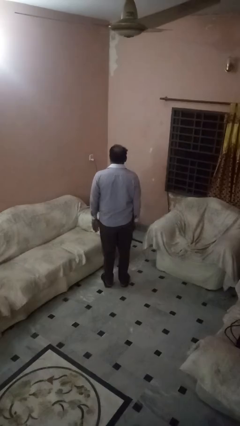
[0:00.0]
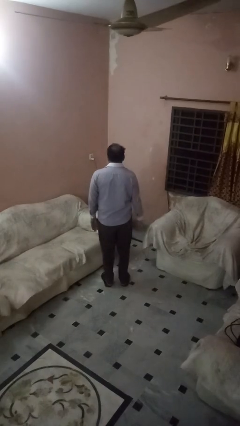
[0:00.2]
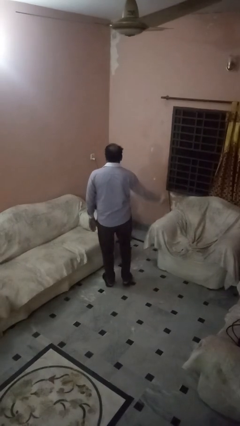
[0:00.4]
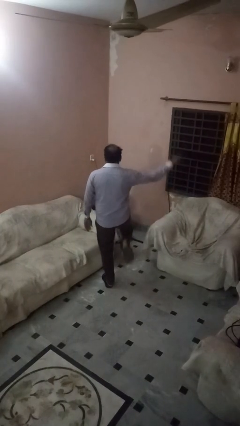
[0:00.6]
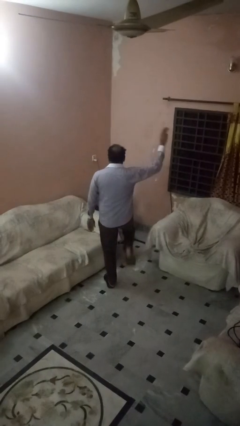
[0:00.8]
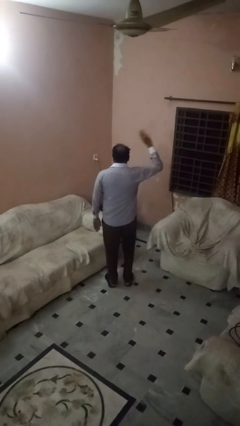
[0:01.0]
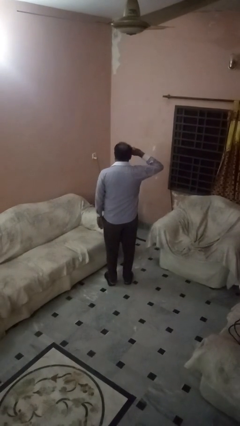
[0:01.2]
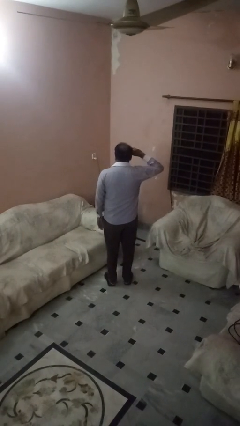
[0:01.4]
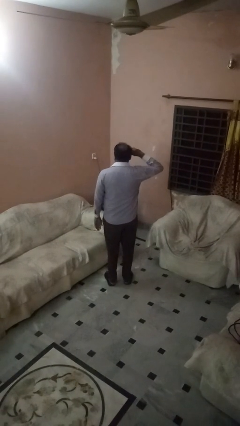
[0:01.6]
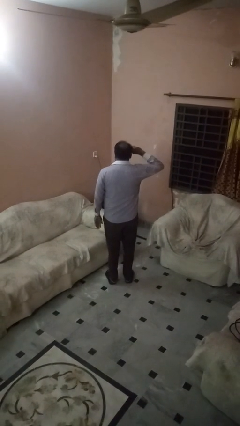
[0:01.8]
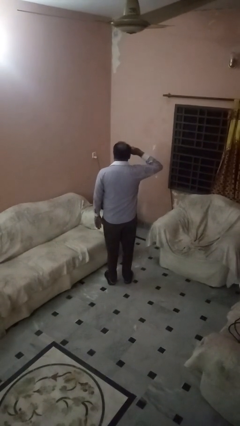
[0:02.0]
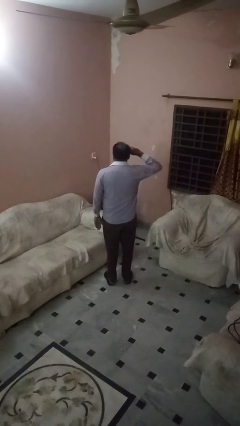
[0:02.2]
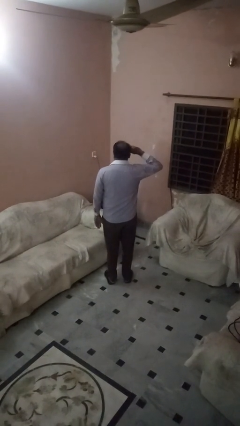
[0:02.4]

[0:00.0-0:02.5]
person salutes

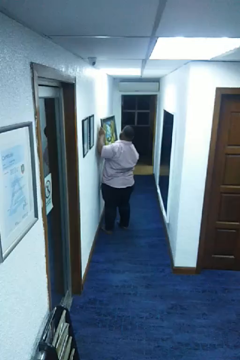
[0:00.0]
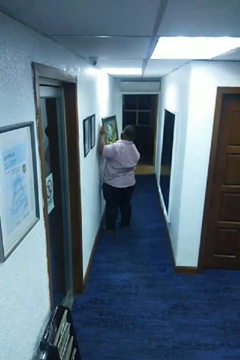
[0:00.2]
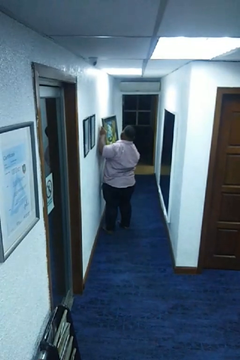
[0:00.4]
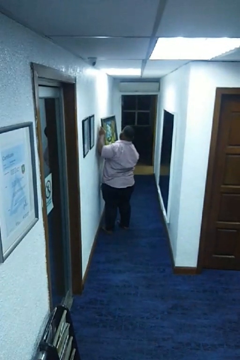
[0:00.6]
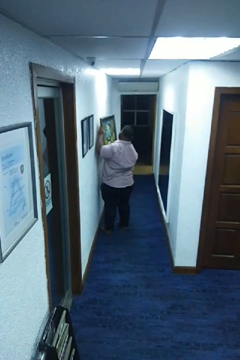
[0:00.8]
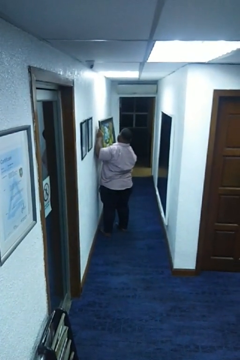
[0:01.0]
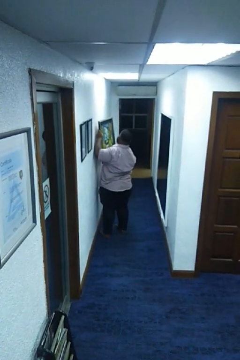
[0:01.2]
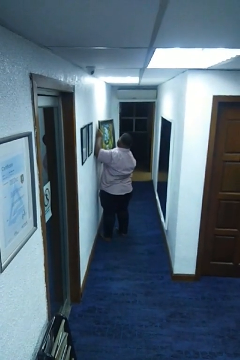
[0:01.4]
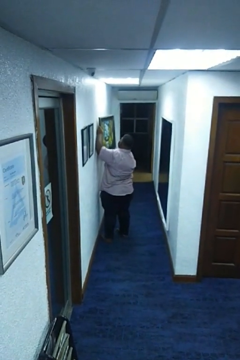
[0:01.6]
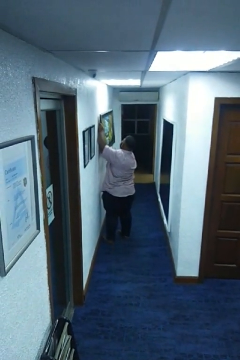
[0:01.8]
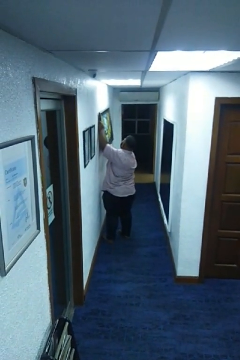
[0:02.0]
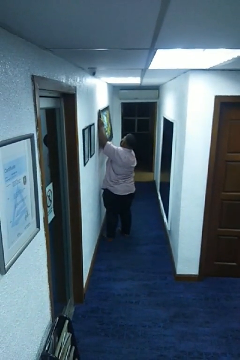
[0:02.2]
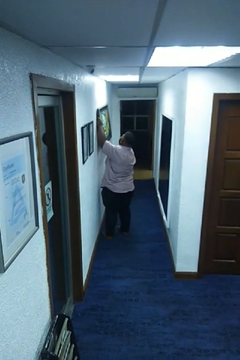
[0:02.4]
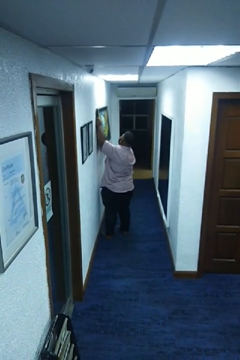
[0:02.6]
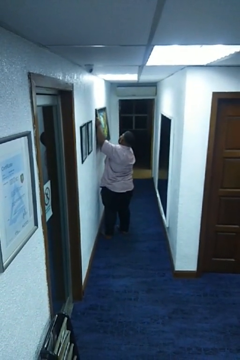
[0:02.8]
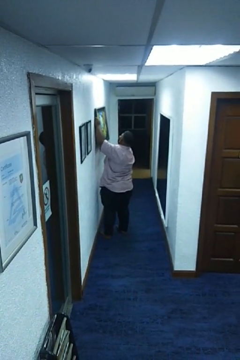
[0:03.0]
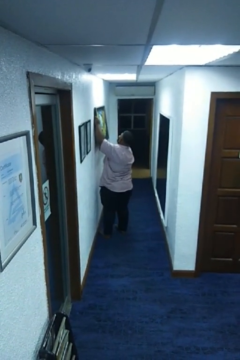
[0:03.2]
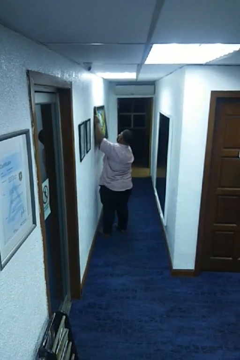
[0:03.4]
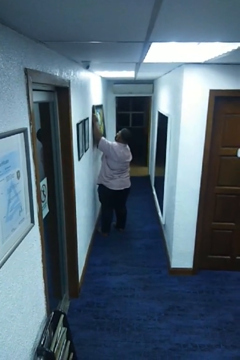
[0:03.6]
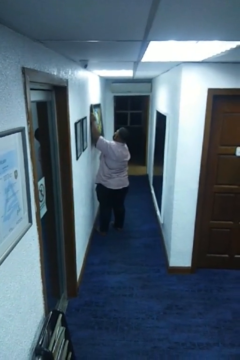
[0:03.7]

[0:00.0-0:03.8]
person puts up picture frame

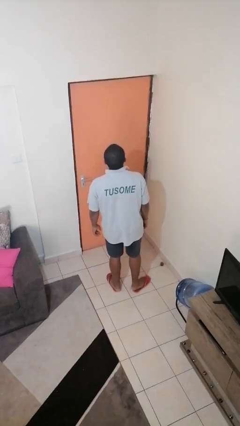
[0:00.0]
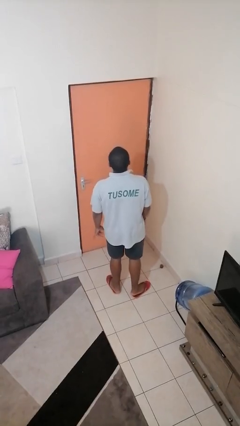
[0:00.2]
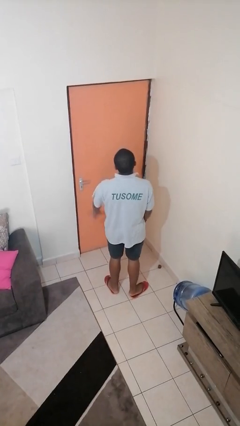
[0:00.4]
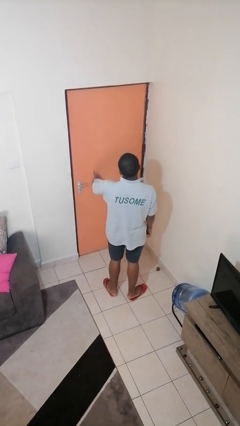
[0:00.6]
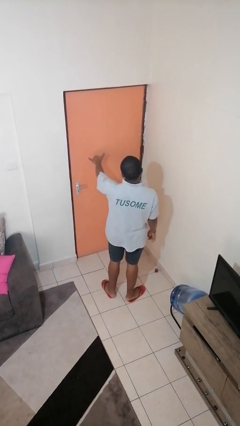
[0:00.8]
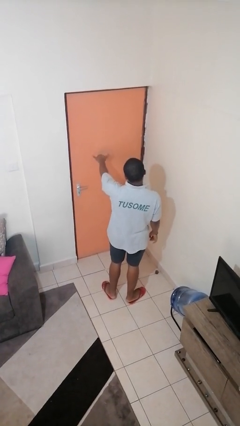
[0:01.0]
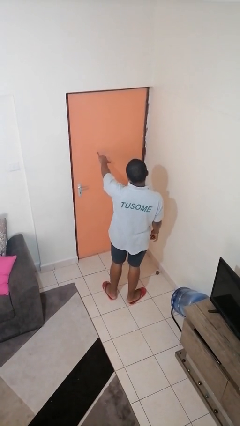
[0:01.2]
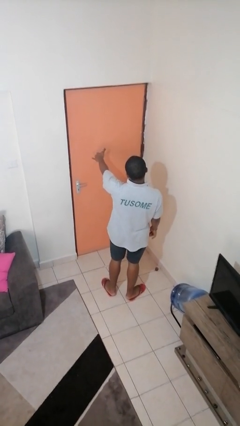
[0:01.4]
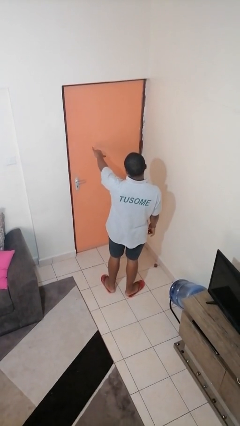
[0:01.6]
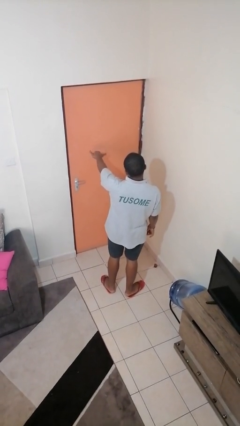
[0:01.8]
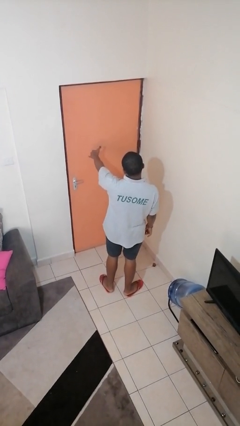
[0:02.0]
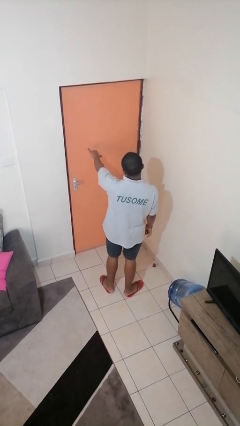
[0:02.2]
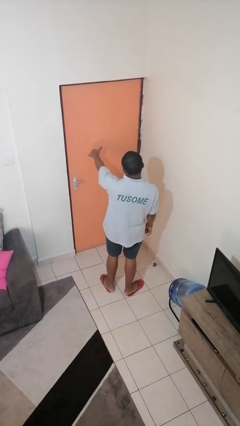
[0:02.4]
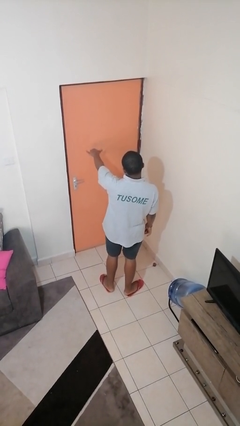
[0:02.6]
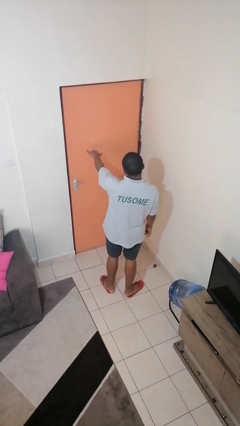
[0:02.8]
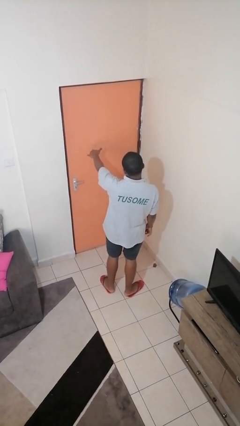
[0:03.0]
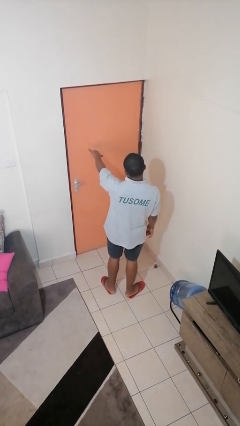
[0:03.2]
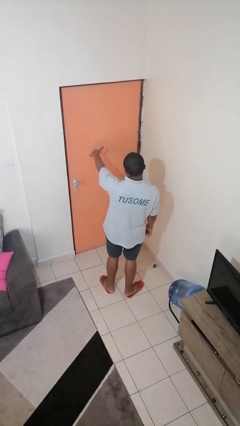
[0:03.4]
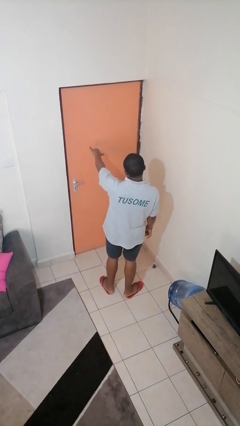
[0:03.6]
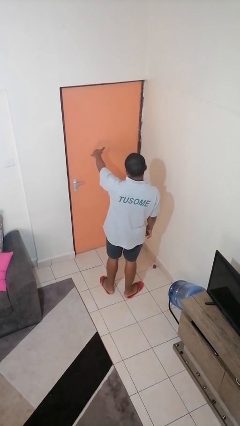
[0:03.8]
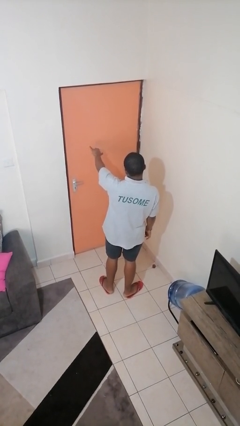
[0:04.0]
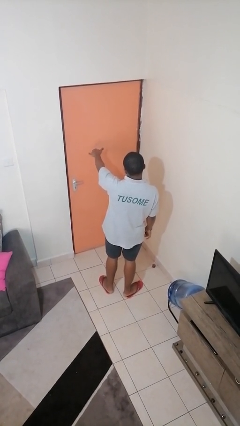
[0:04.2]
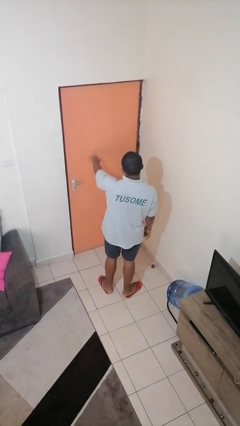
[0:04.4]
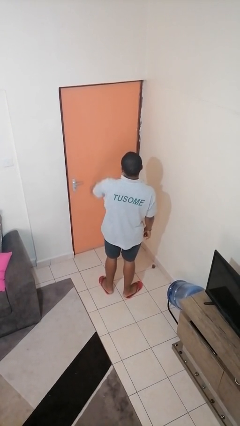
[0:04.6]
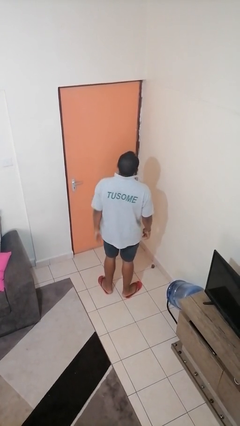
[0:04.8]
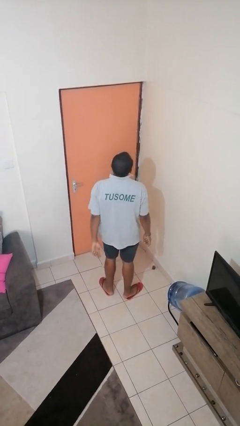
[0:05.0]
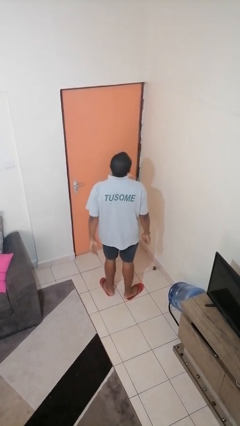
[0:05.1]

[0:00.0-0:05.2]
person gestures hang loose

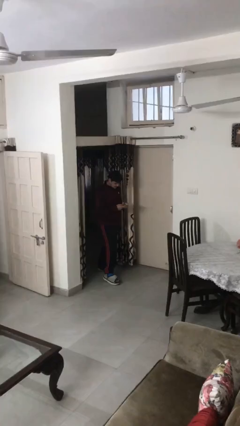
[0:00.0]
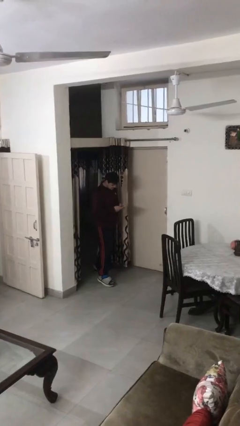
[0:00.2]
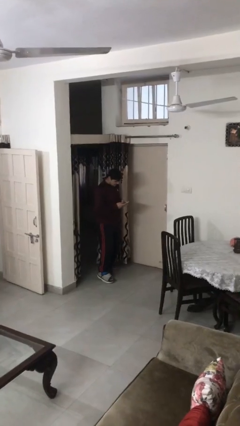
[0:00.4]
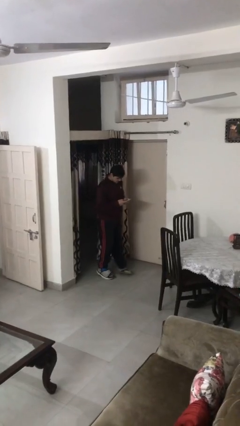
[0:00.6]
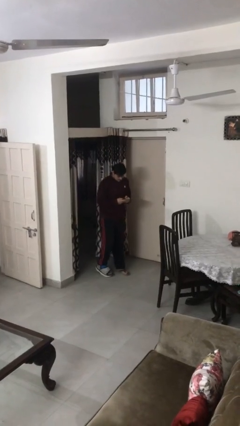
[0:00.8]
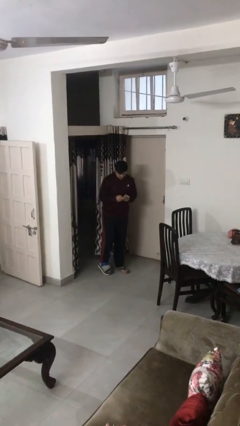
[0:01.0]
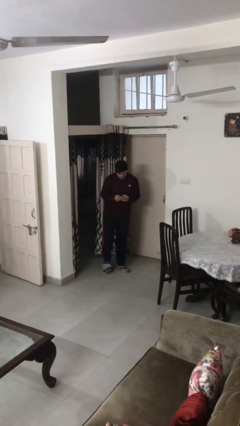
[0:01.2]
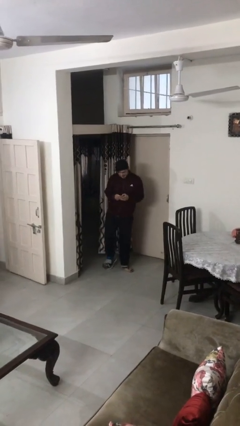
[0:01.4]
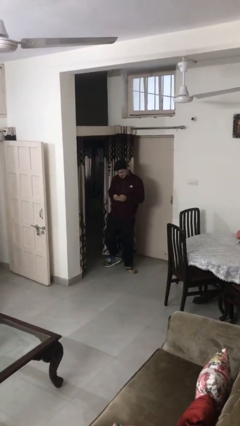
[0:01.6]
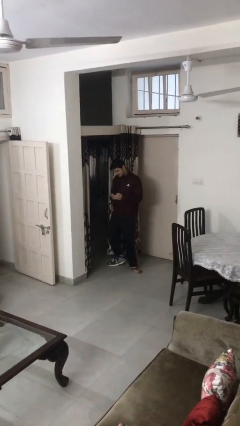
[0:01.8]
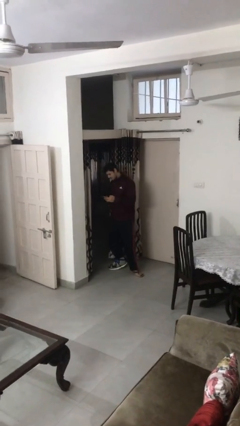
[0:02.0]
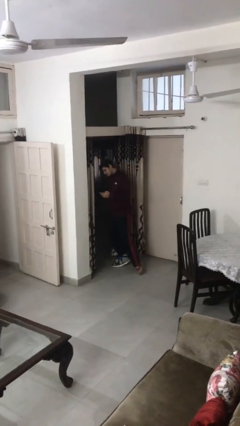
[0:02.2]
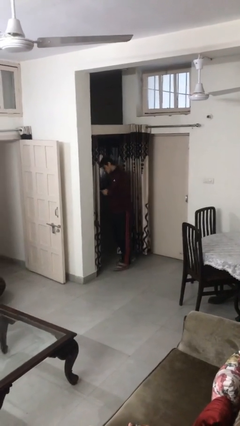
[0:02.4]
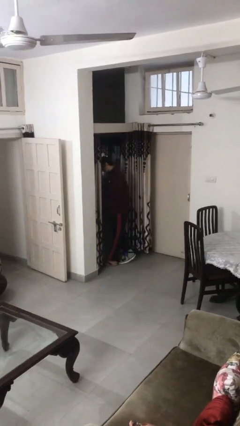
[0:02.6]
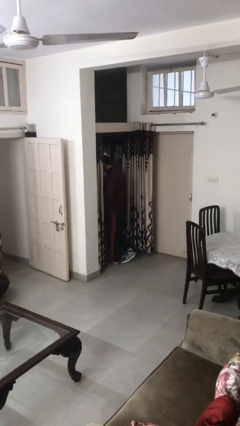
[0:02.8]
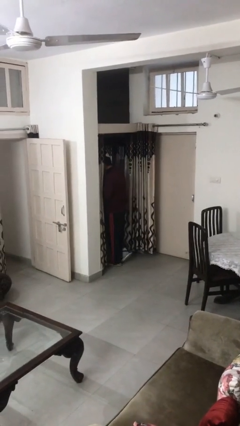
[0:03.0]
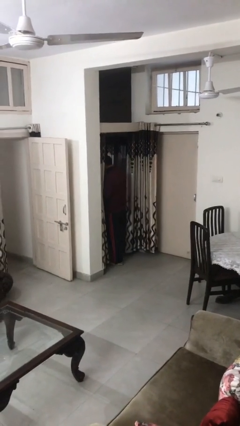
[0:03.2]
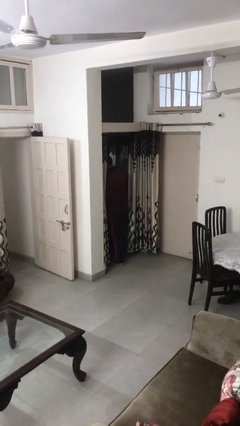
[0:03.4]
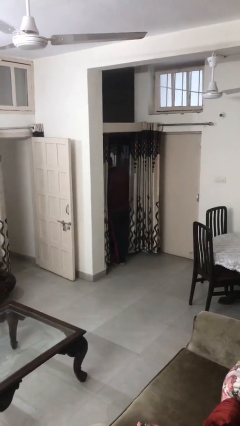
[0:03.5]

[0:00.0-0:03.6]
person exits scene through structure

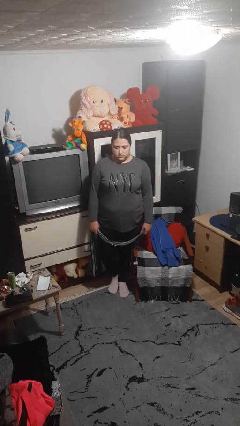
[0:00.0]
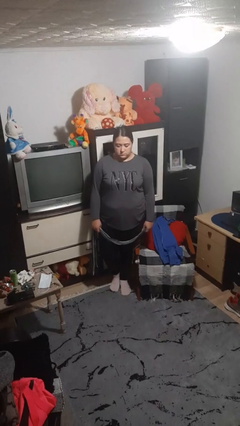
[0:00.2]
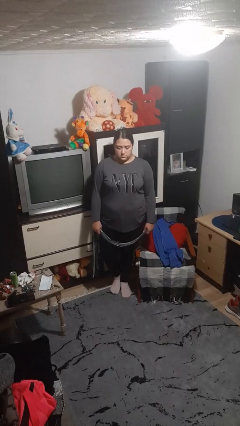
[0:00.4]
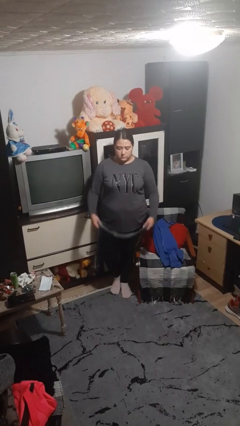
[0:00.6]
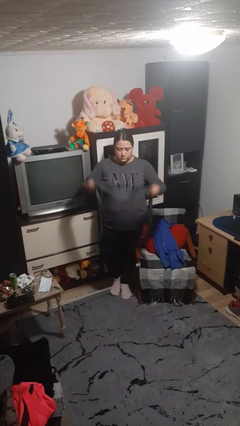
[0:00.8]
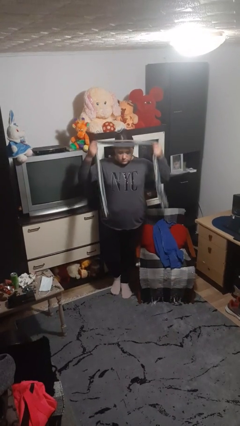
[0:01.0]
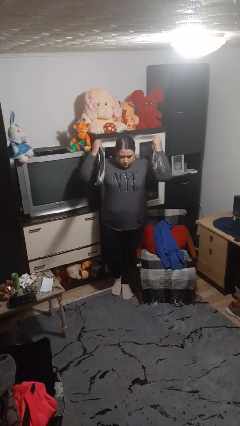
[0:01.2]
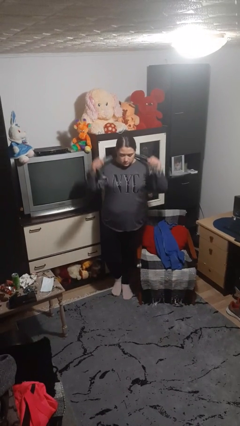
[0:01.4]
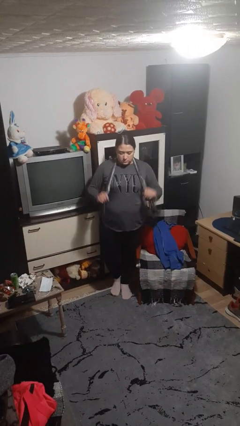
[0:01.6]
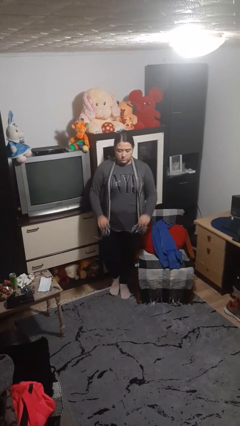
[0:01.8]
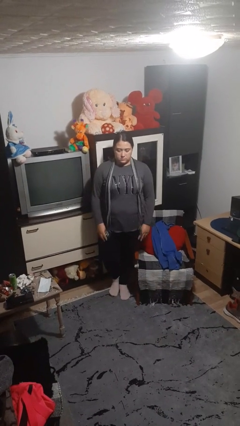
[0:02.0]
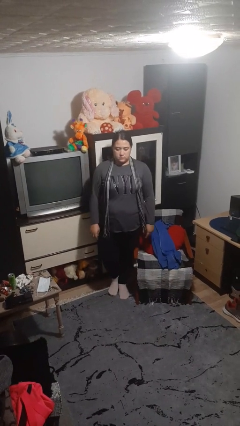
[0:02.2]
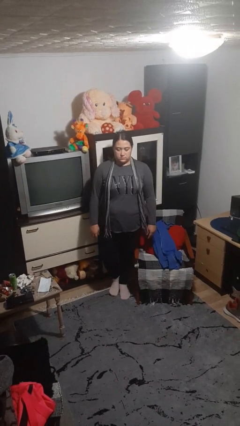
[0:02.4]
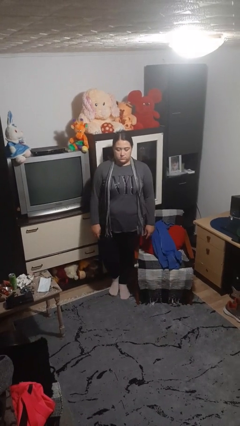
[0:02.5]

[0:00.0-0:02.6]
person puts on scarf

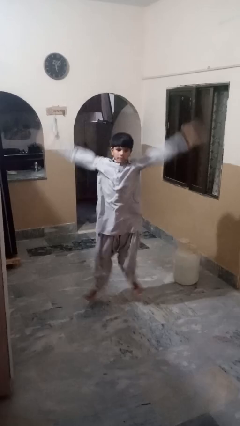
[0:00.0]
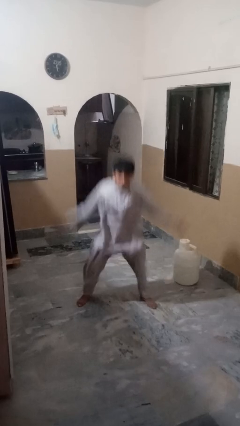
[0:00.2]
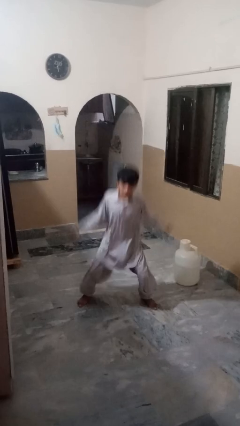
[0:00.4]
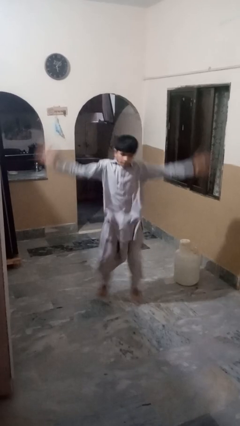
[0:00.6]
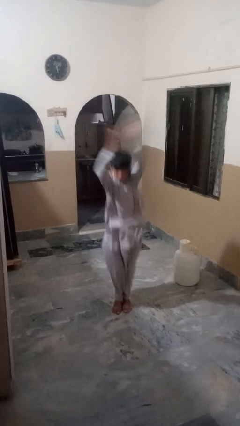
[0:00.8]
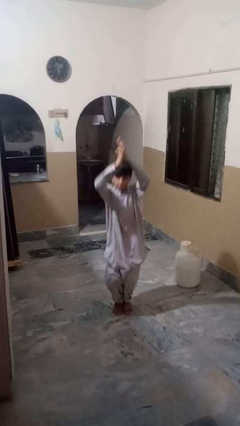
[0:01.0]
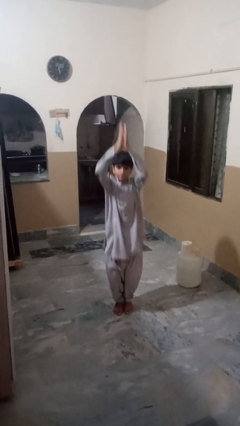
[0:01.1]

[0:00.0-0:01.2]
person exercises with jumping jacks
